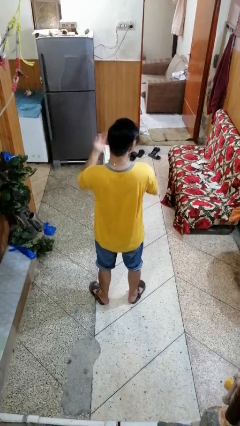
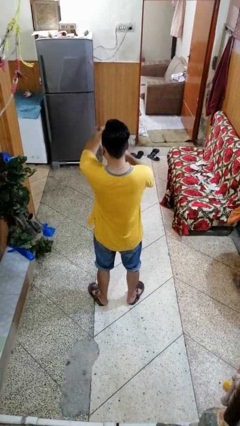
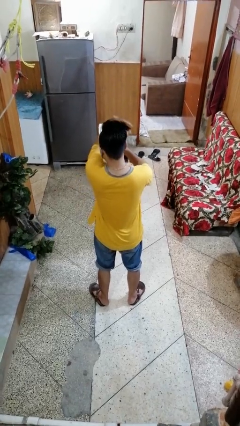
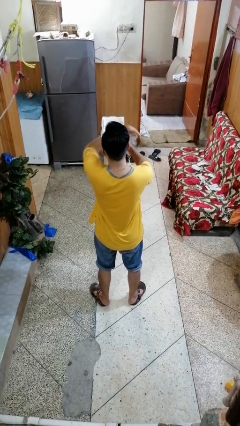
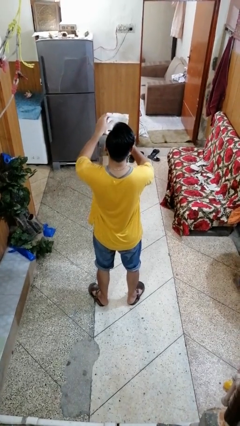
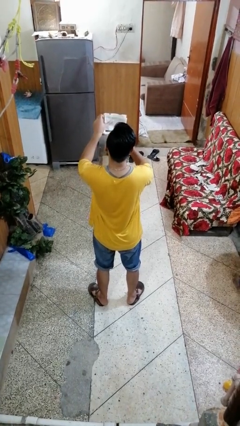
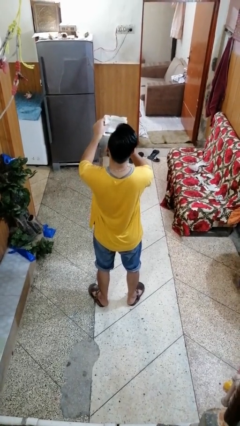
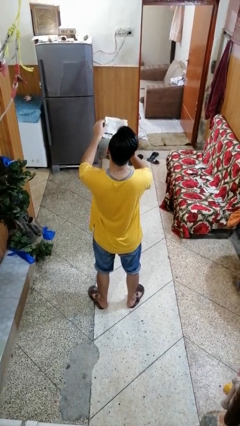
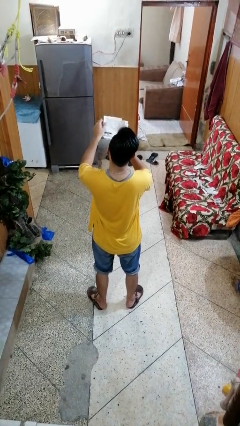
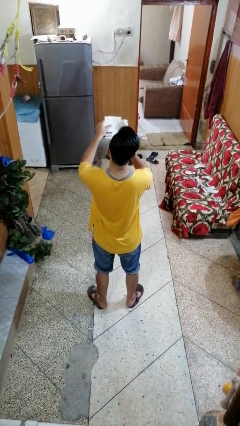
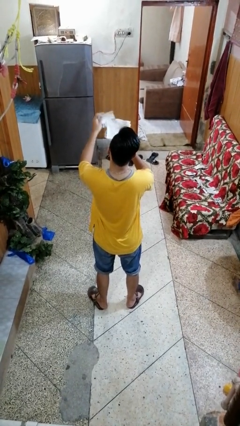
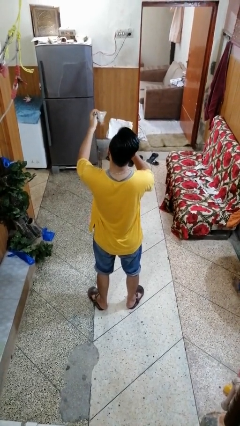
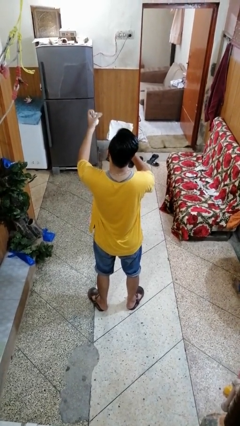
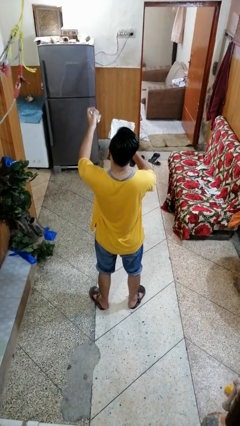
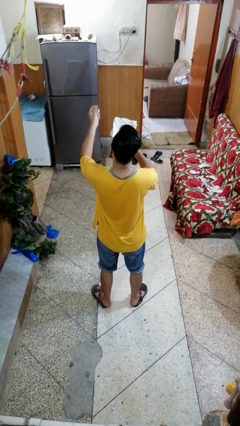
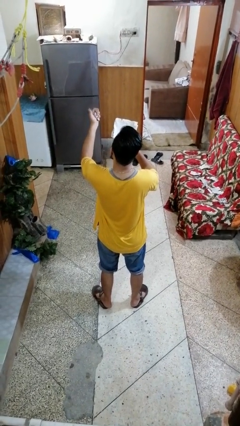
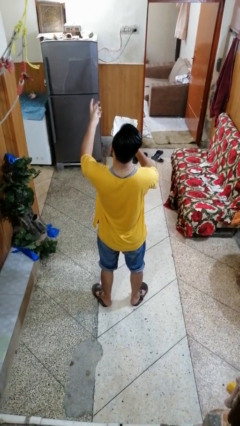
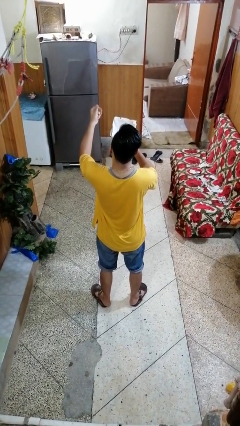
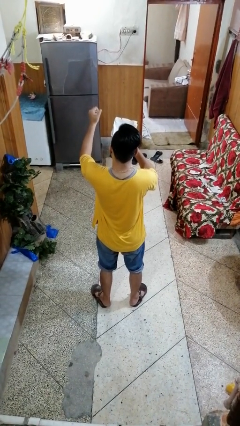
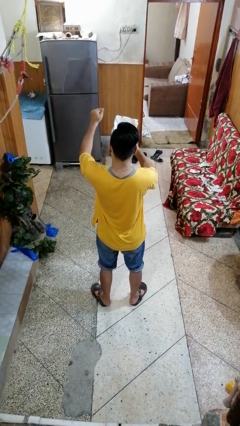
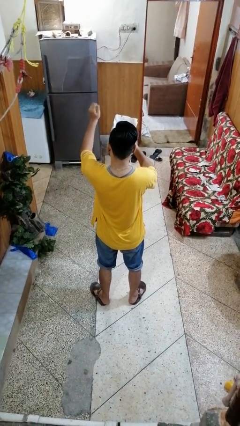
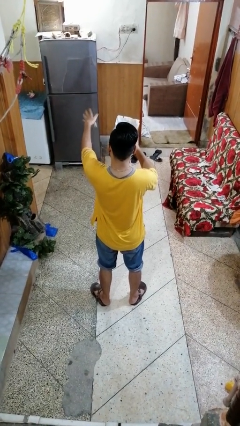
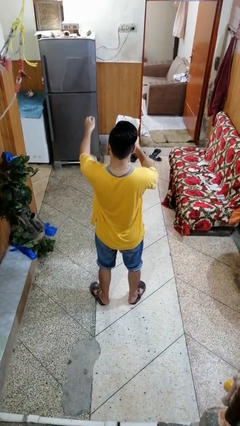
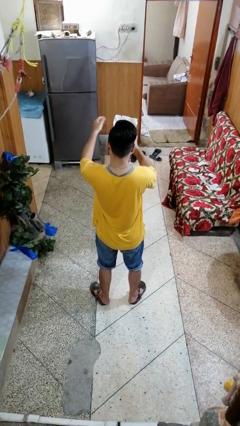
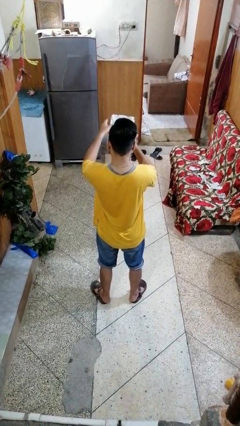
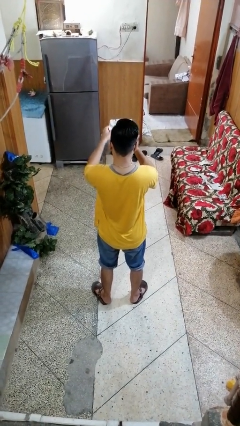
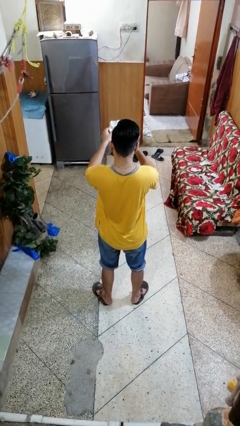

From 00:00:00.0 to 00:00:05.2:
person crumples paper

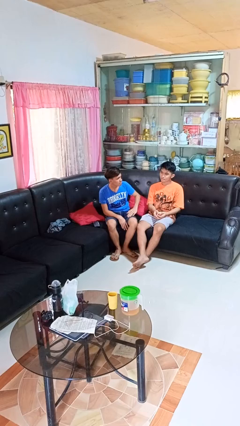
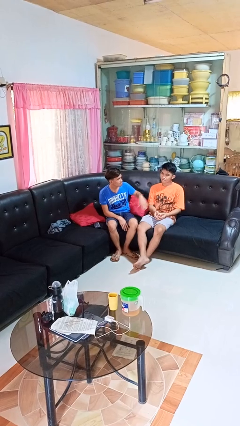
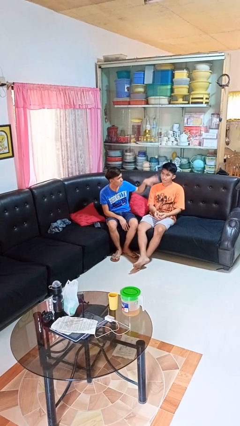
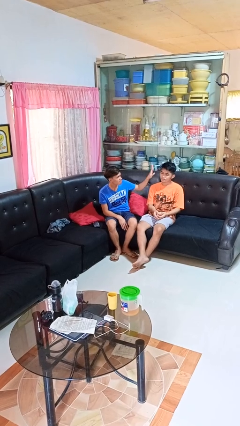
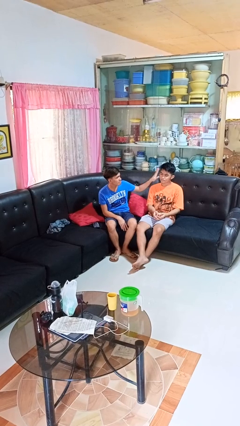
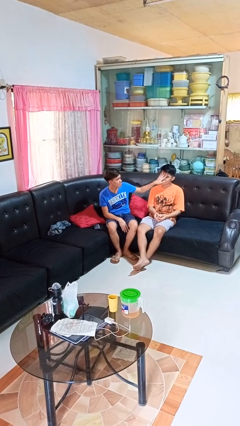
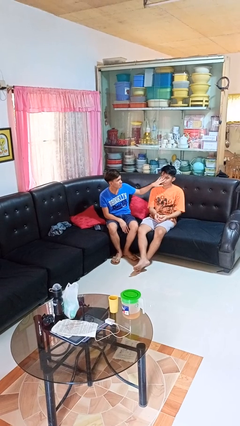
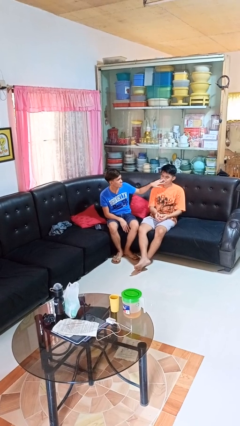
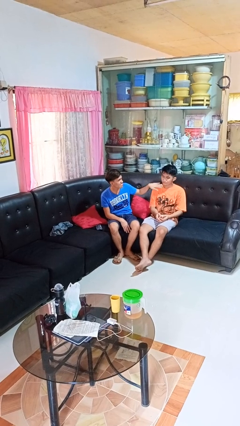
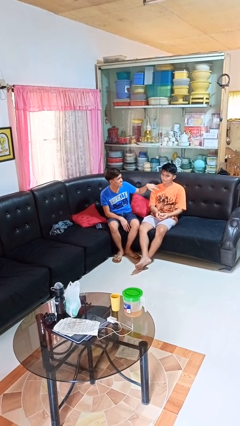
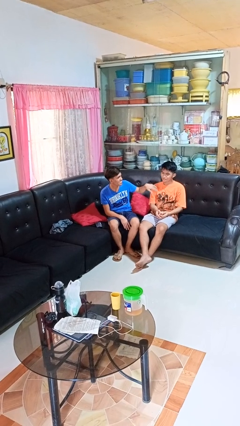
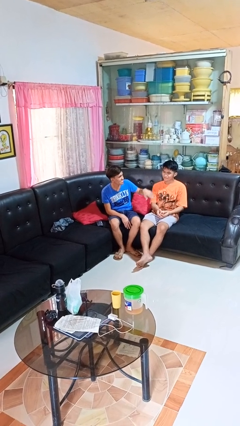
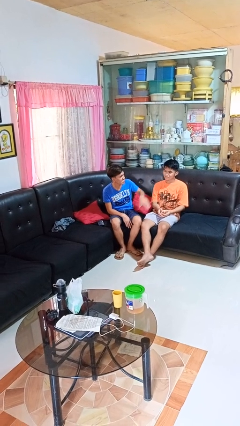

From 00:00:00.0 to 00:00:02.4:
person touches face of person

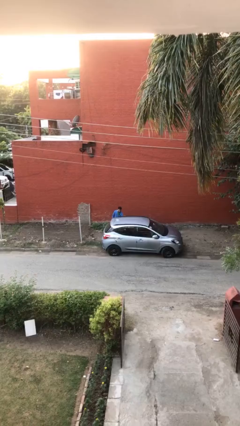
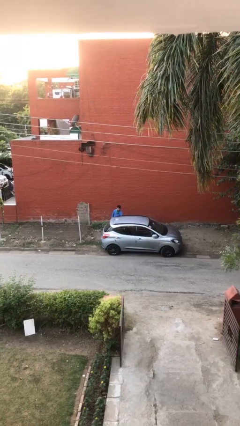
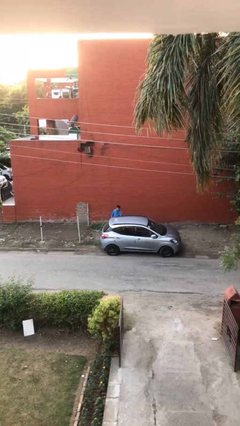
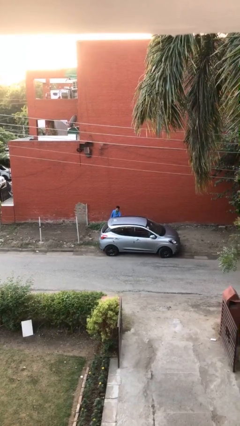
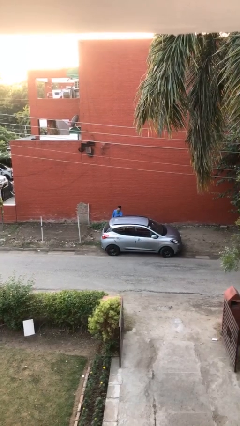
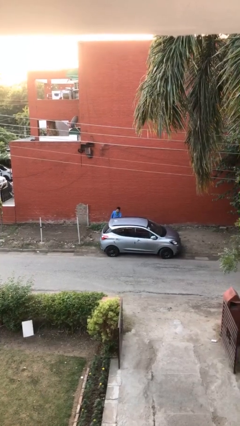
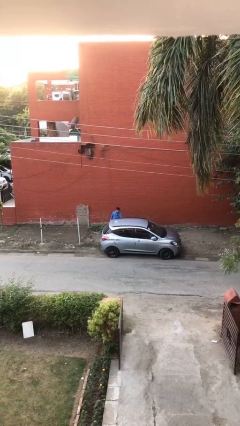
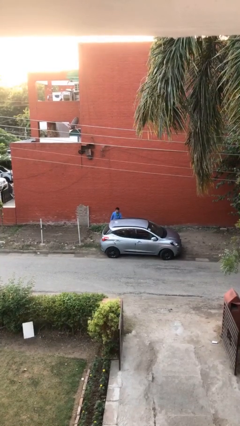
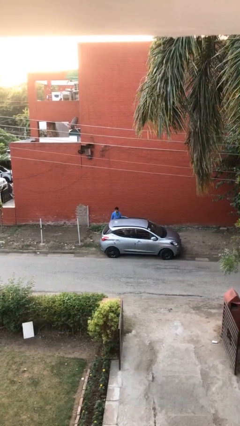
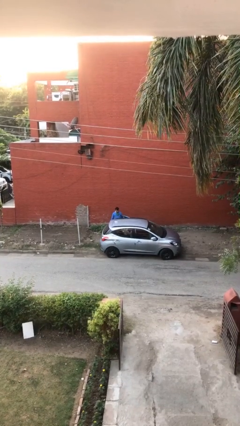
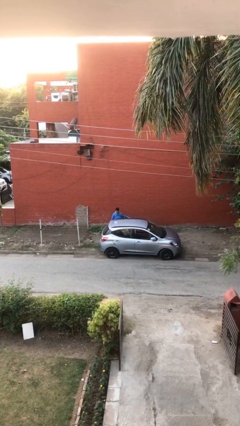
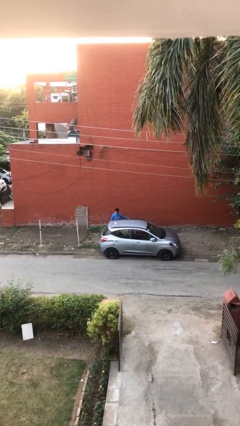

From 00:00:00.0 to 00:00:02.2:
person opens car door

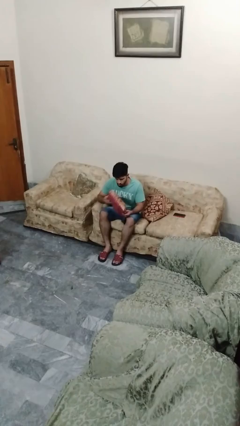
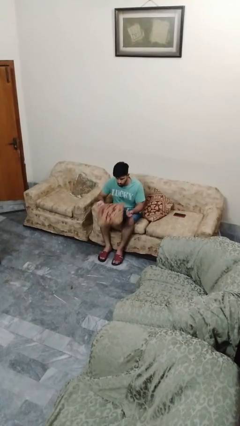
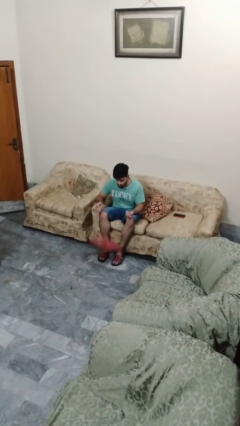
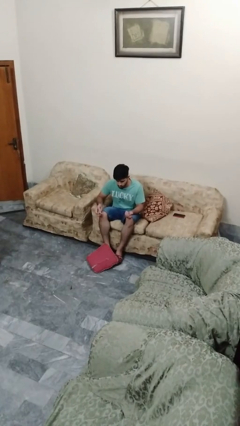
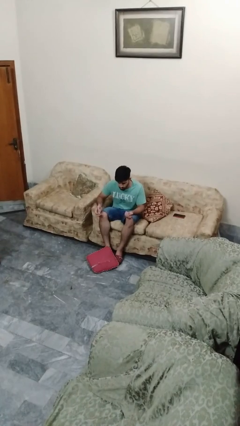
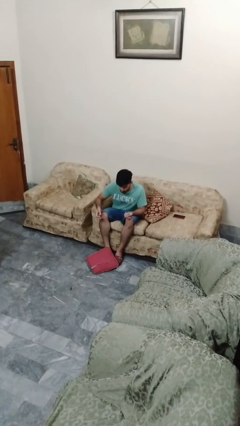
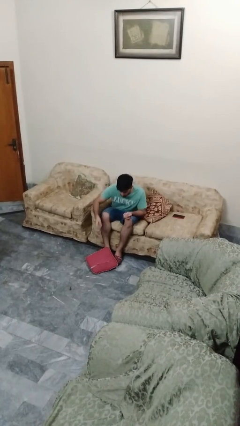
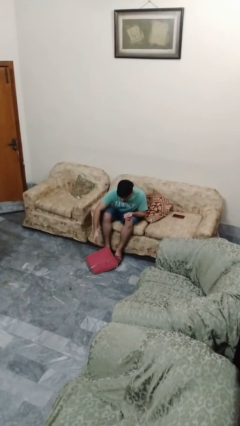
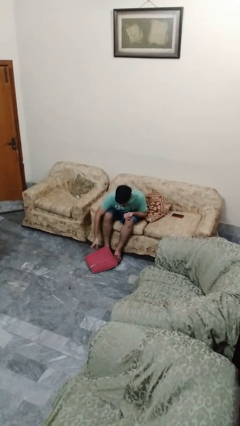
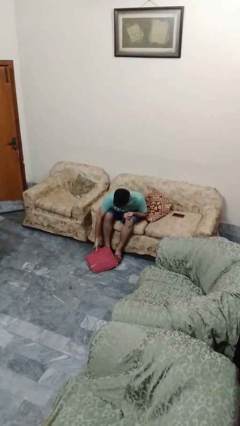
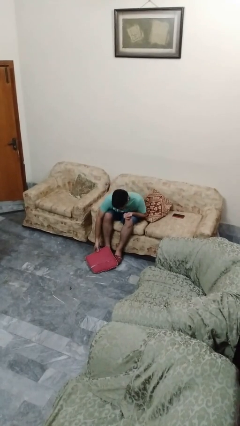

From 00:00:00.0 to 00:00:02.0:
person drops object

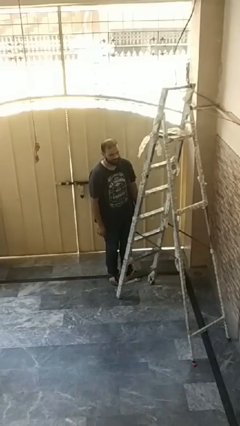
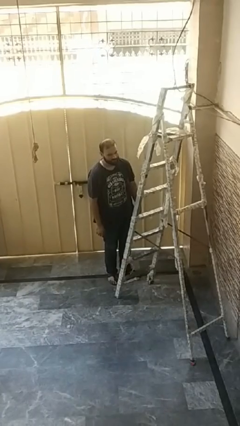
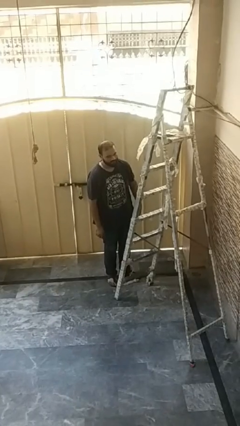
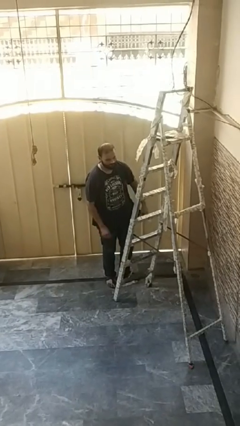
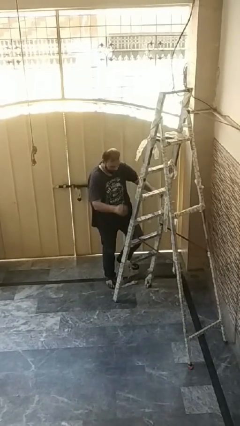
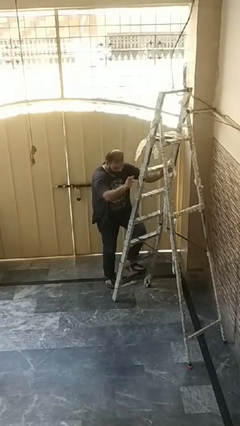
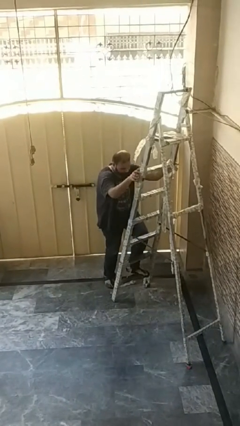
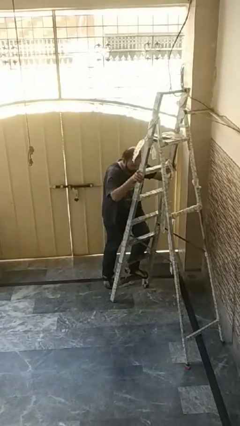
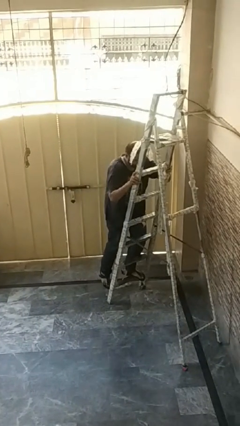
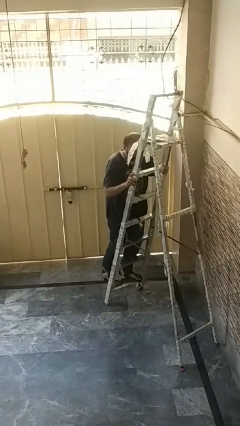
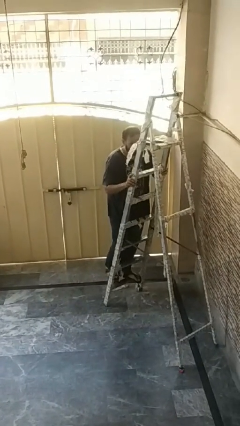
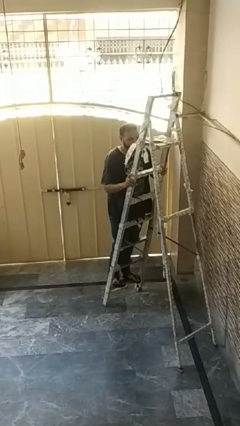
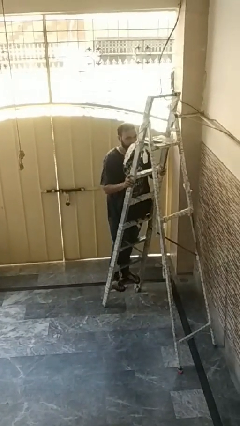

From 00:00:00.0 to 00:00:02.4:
person climbs up ladder

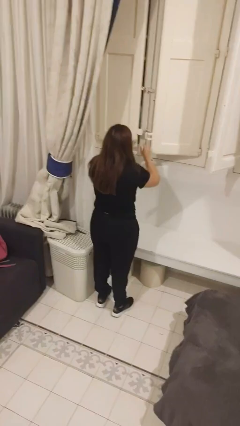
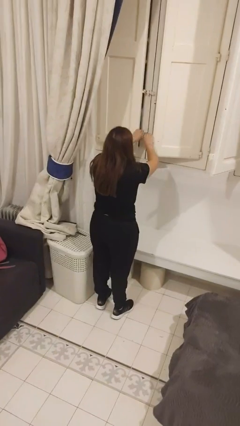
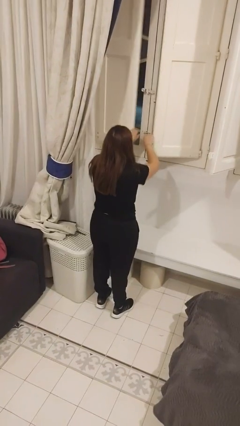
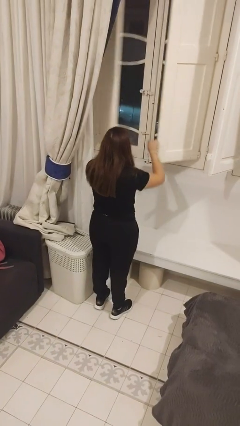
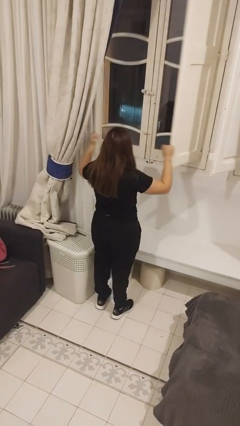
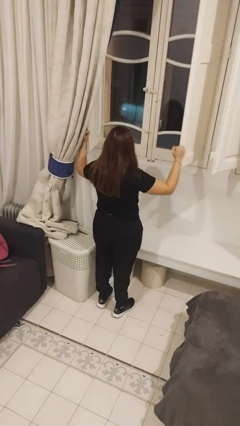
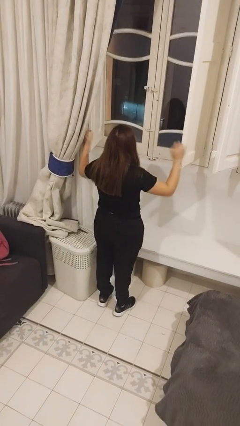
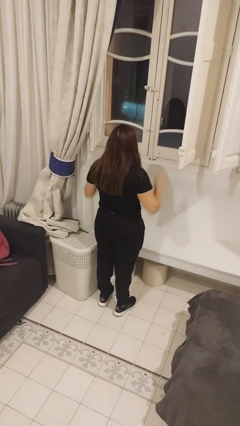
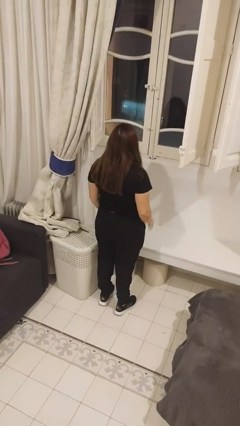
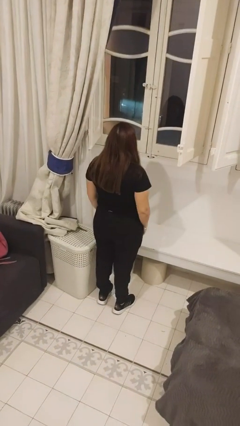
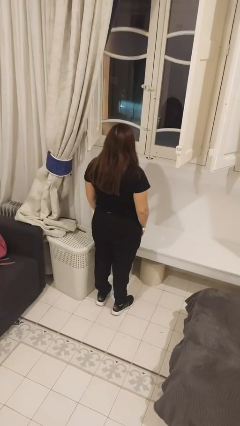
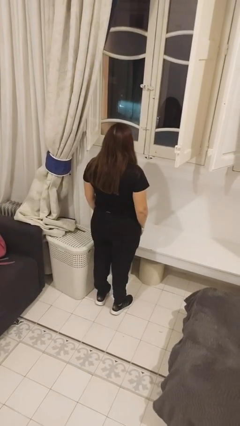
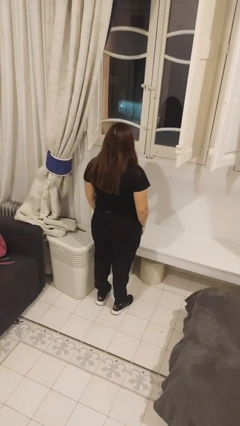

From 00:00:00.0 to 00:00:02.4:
person opens home window

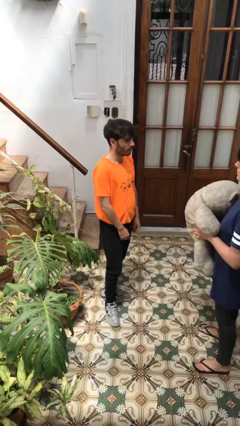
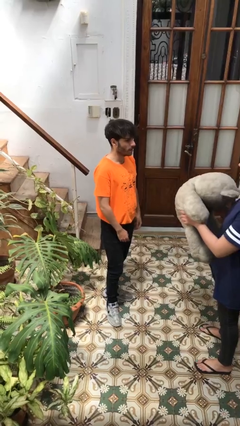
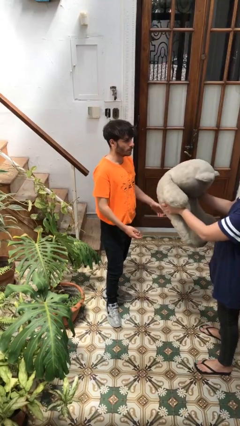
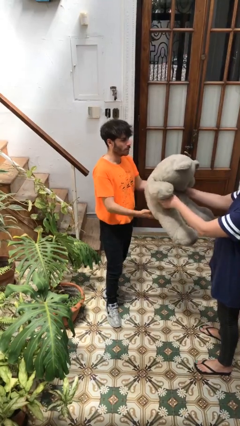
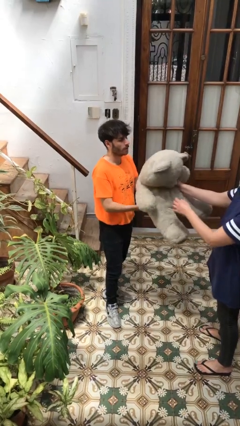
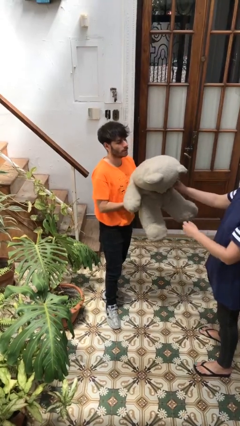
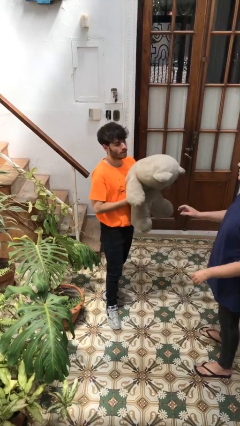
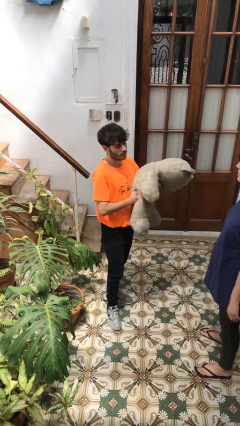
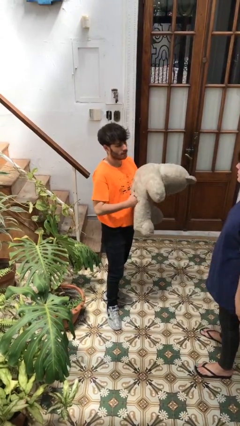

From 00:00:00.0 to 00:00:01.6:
person transfers object to person
